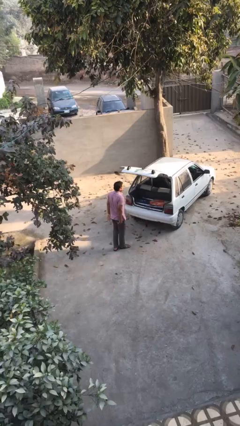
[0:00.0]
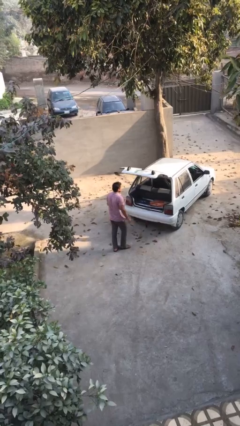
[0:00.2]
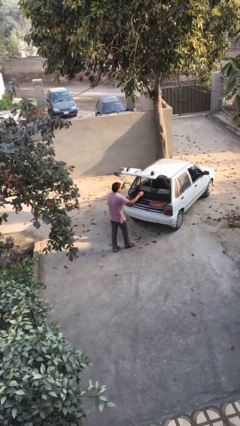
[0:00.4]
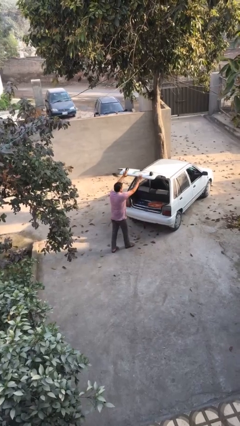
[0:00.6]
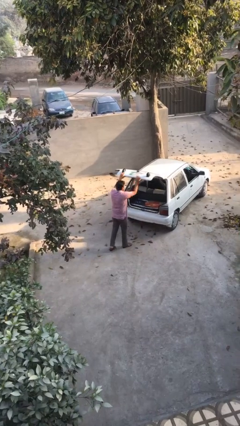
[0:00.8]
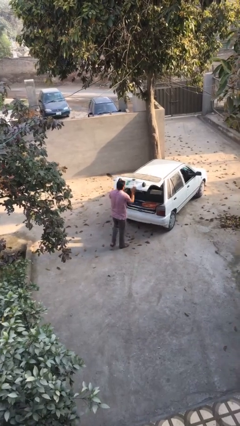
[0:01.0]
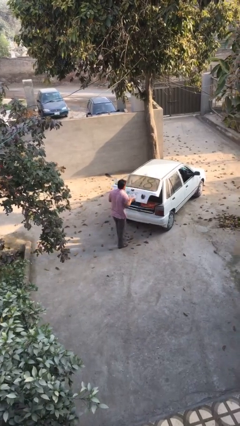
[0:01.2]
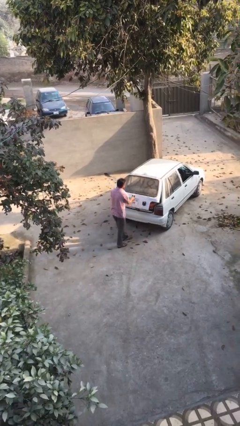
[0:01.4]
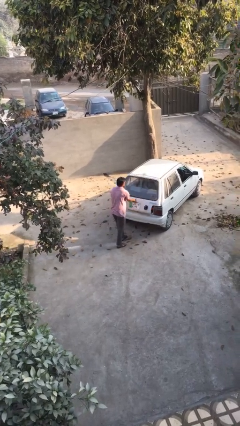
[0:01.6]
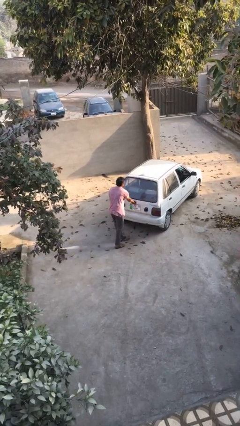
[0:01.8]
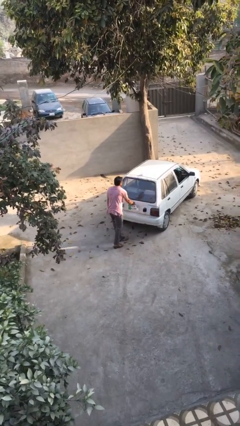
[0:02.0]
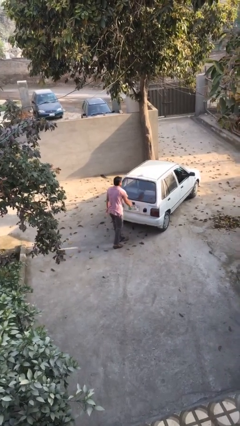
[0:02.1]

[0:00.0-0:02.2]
person closes car trunk

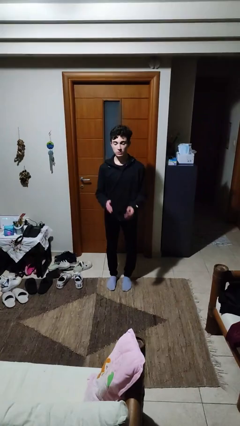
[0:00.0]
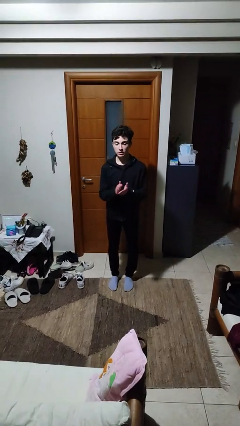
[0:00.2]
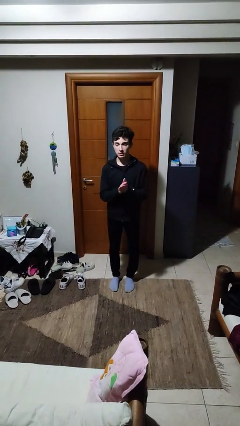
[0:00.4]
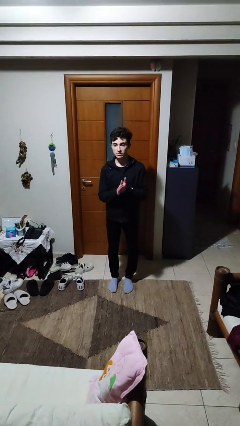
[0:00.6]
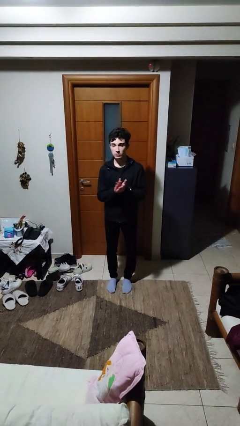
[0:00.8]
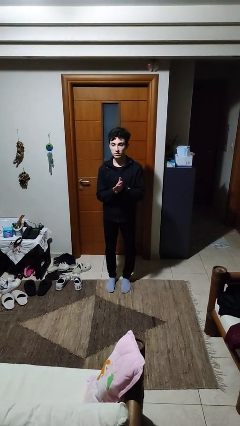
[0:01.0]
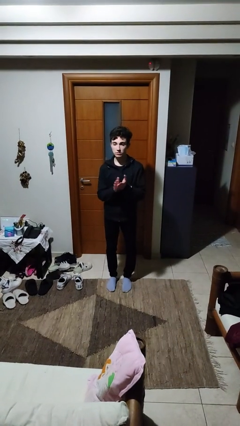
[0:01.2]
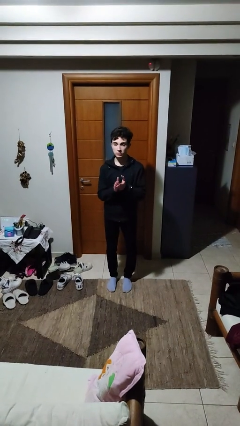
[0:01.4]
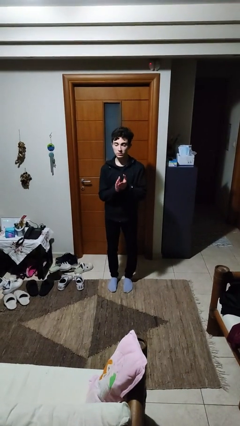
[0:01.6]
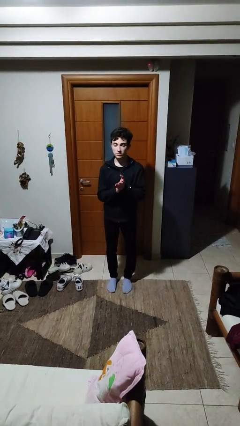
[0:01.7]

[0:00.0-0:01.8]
person claps hands

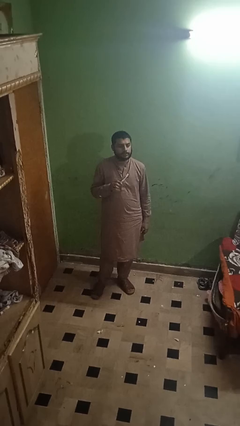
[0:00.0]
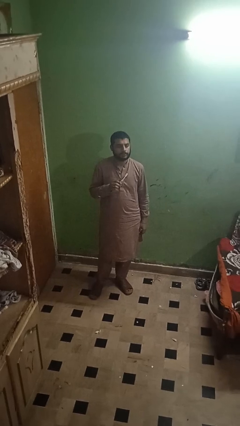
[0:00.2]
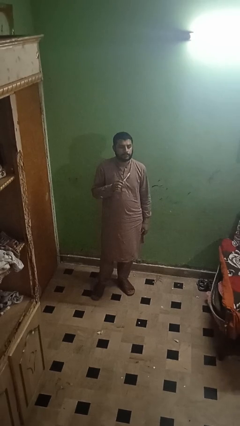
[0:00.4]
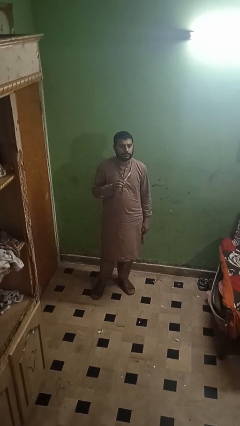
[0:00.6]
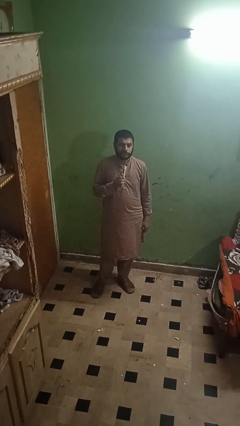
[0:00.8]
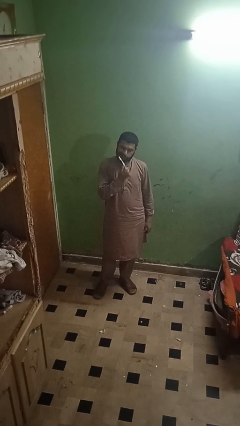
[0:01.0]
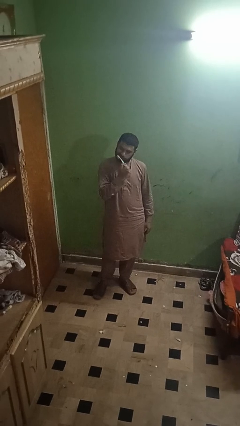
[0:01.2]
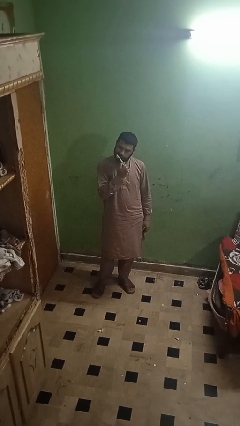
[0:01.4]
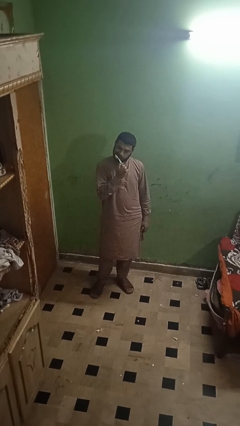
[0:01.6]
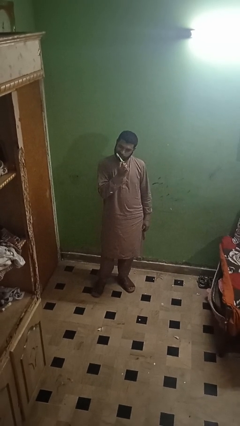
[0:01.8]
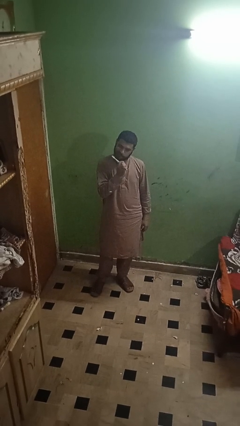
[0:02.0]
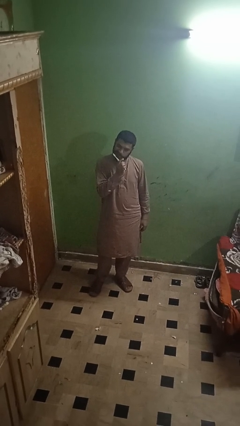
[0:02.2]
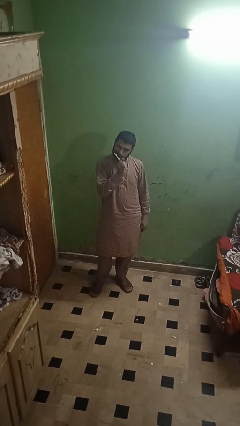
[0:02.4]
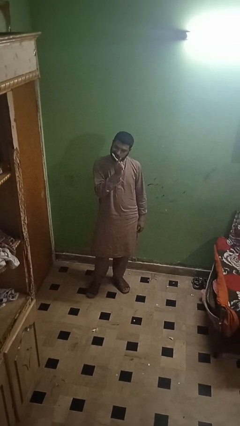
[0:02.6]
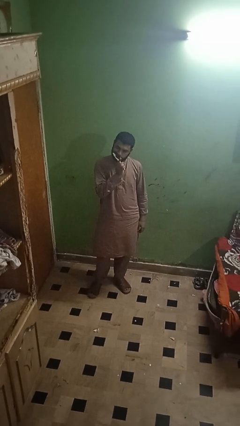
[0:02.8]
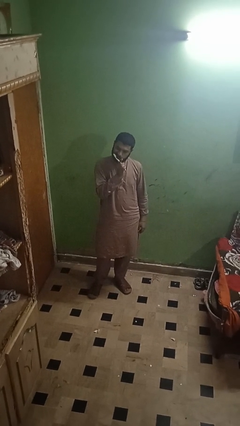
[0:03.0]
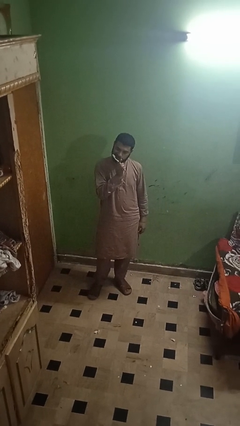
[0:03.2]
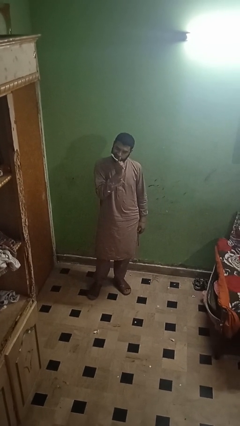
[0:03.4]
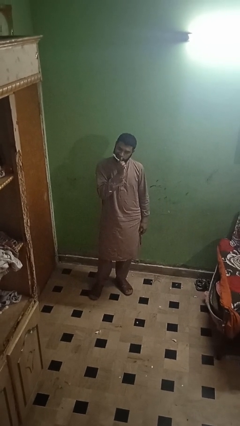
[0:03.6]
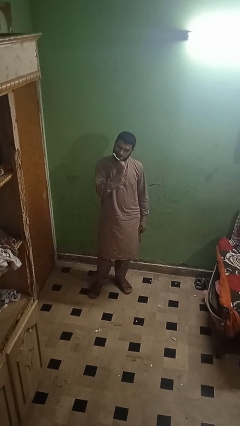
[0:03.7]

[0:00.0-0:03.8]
person brushes teeth

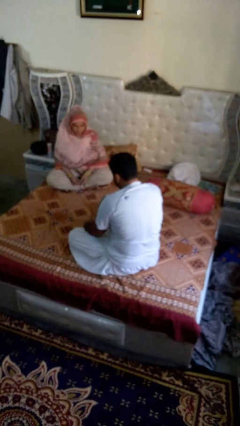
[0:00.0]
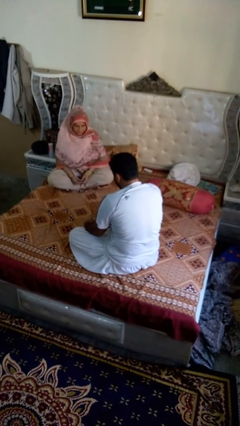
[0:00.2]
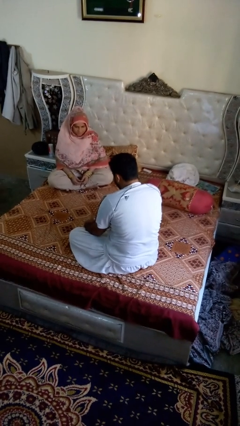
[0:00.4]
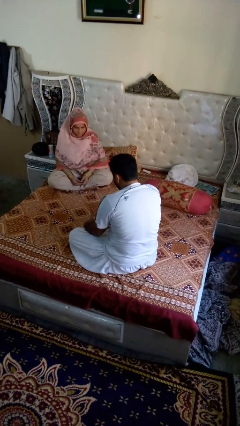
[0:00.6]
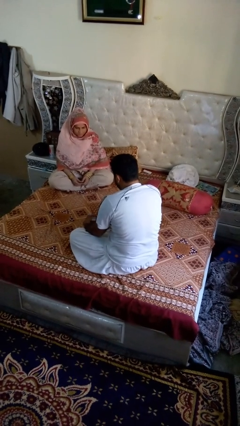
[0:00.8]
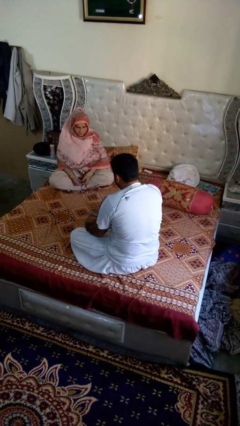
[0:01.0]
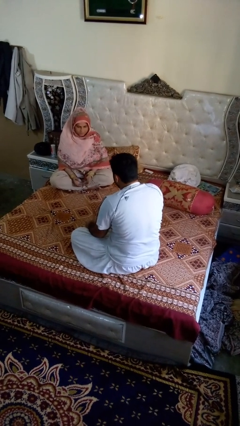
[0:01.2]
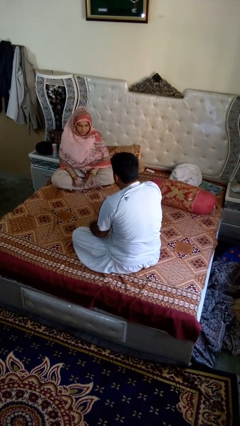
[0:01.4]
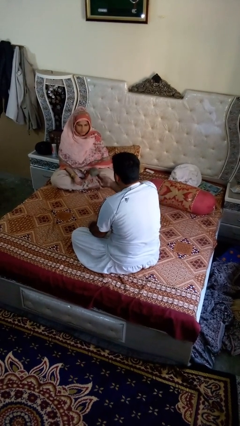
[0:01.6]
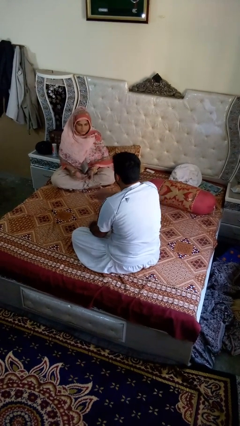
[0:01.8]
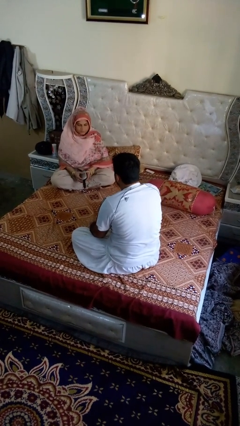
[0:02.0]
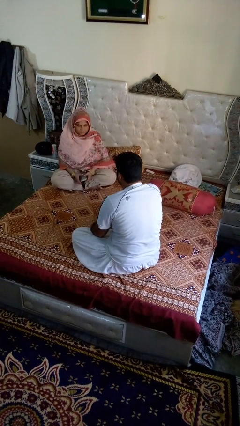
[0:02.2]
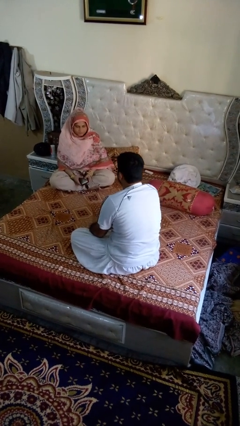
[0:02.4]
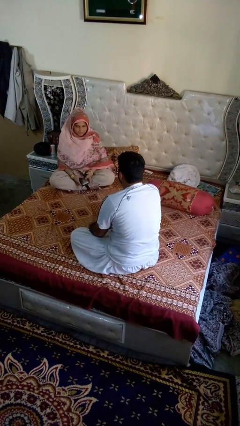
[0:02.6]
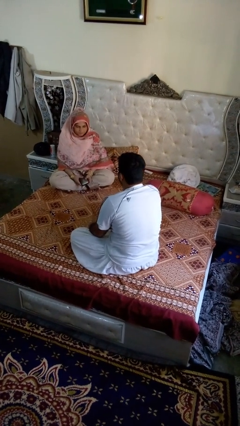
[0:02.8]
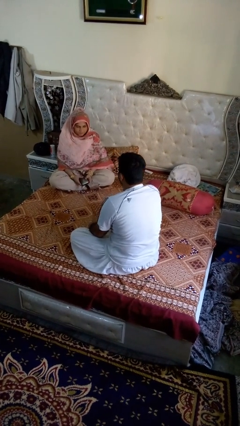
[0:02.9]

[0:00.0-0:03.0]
person throws object to person

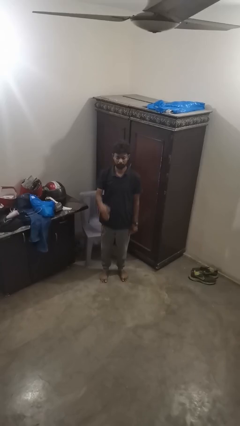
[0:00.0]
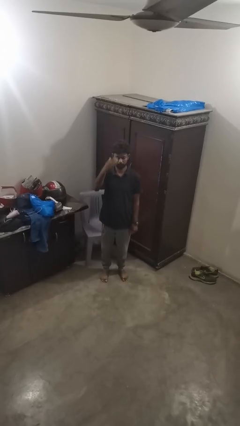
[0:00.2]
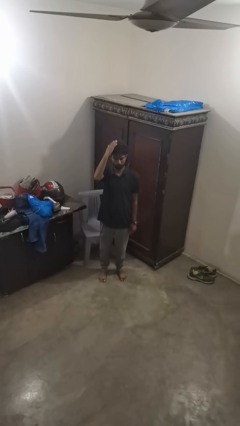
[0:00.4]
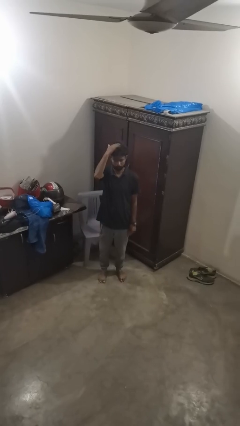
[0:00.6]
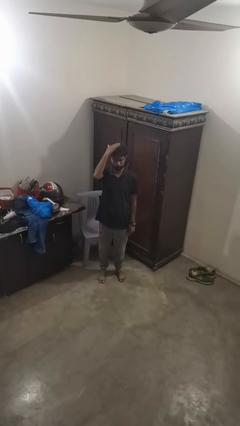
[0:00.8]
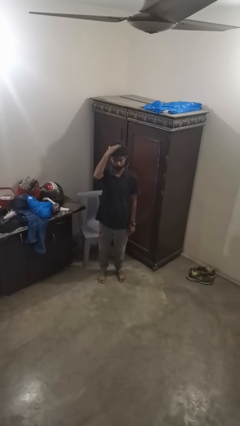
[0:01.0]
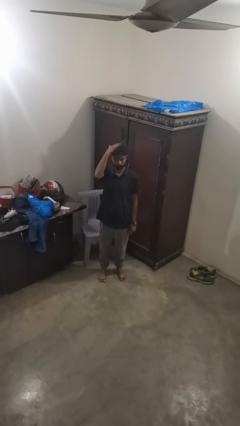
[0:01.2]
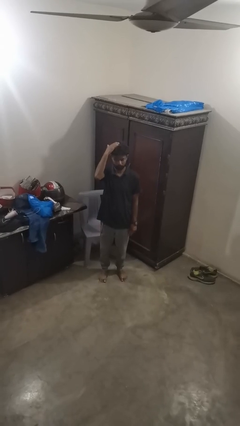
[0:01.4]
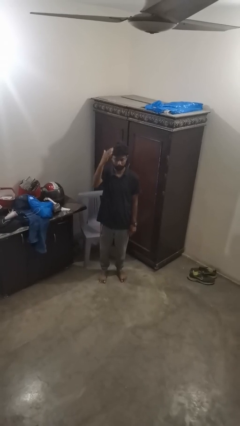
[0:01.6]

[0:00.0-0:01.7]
person pats head

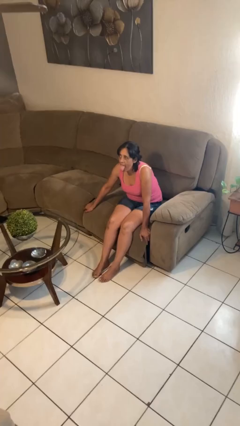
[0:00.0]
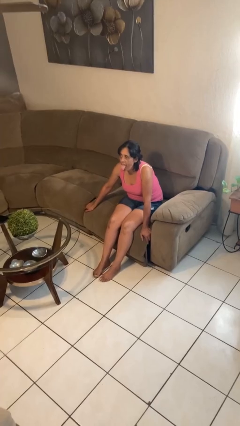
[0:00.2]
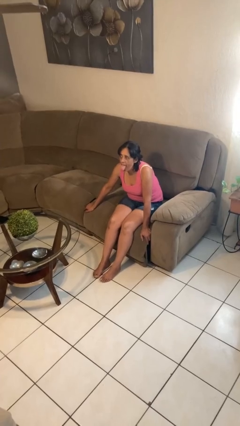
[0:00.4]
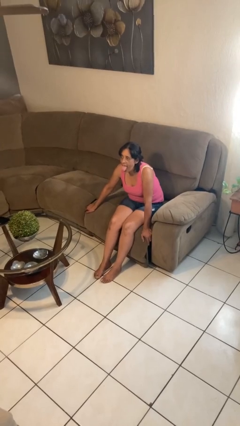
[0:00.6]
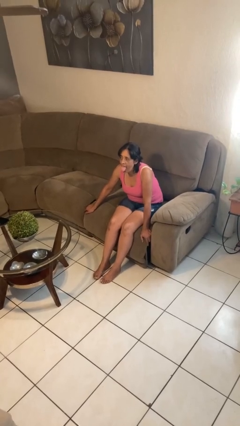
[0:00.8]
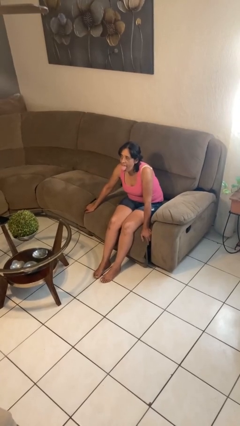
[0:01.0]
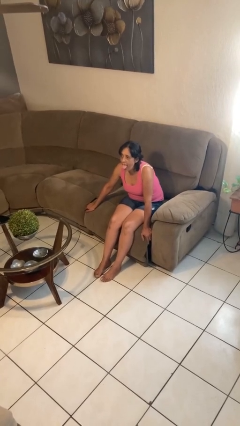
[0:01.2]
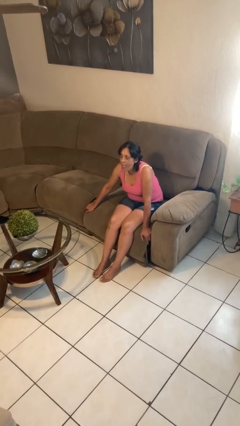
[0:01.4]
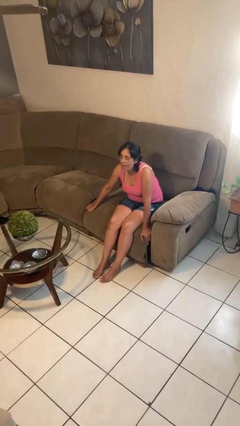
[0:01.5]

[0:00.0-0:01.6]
person sticks out tongue

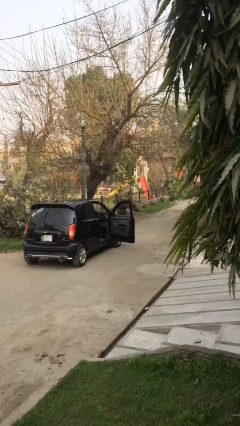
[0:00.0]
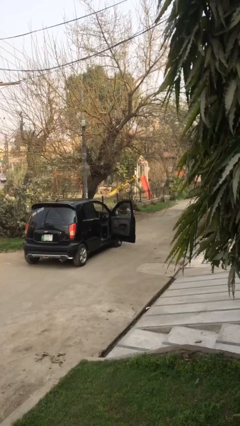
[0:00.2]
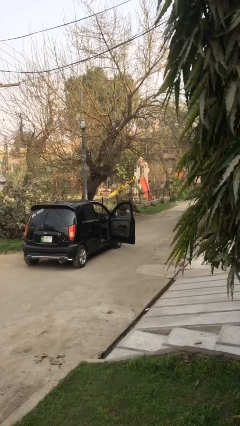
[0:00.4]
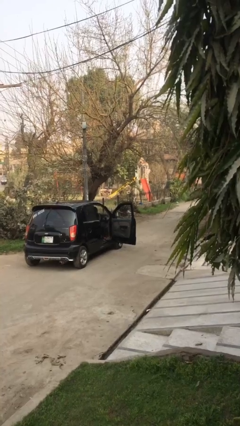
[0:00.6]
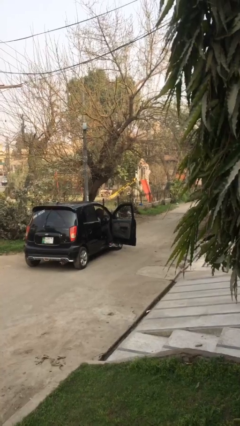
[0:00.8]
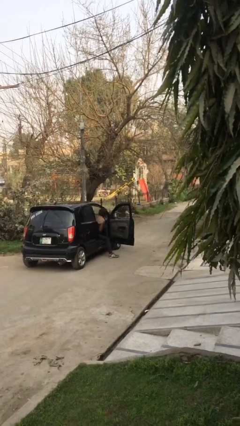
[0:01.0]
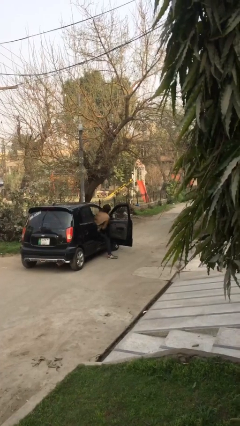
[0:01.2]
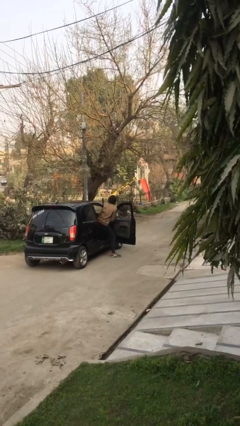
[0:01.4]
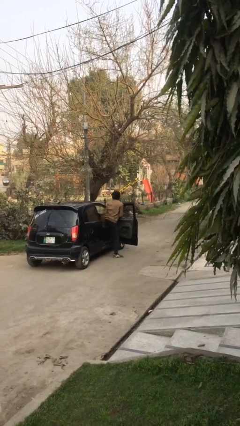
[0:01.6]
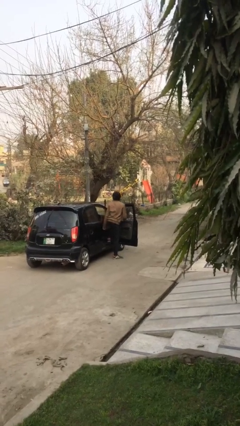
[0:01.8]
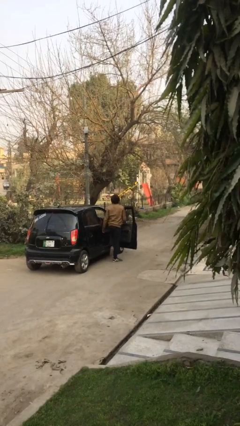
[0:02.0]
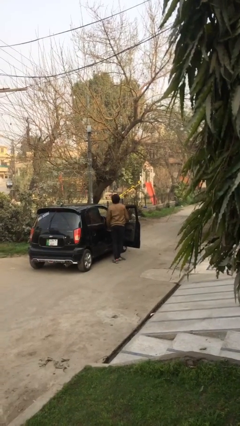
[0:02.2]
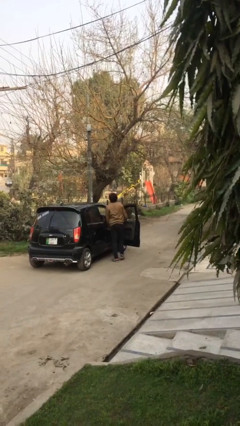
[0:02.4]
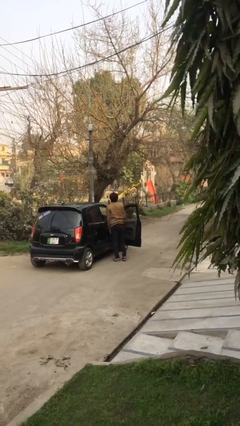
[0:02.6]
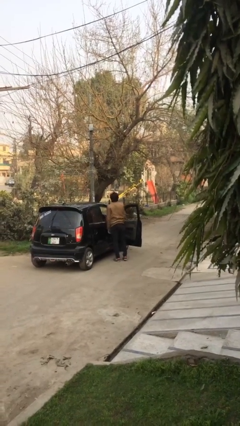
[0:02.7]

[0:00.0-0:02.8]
person exits car

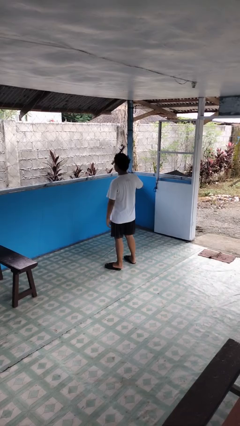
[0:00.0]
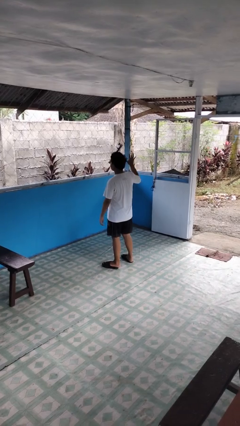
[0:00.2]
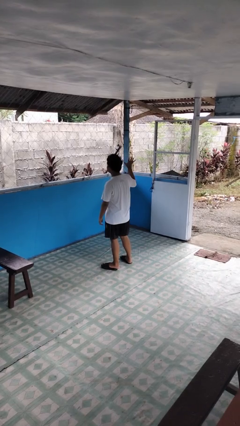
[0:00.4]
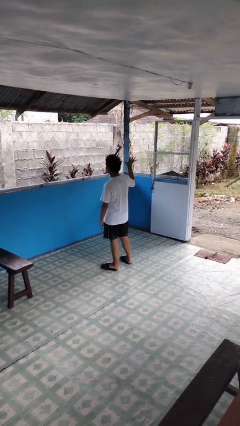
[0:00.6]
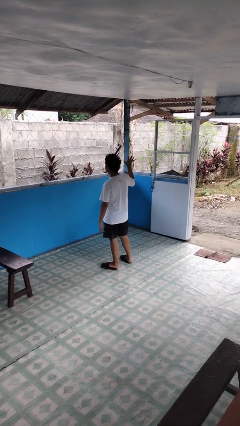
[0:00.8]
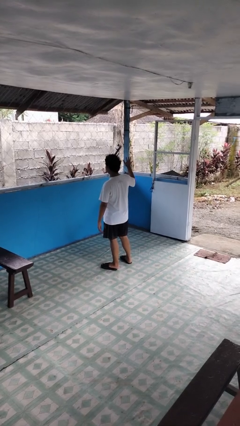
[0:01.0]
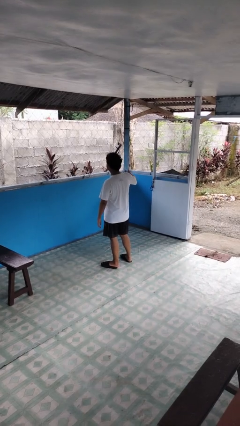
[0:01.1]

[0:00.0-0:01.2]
person gestures number five
